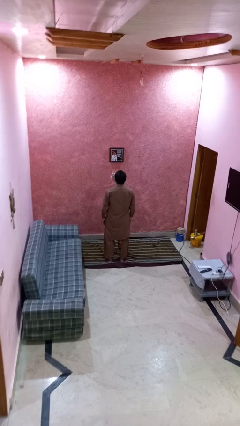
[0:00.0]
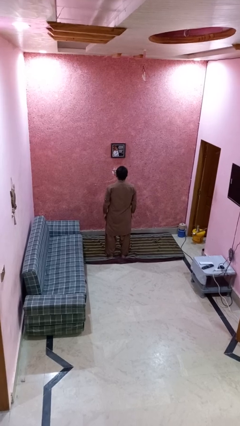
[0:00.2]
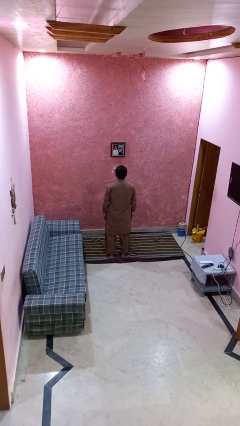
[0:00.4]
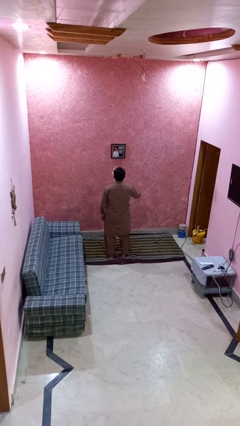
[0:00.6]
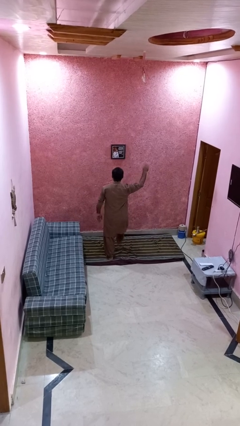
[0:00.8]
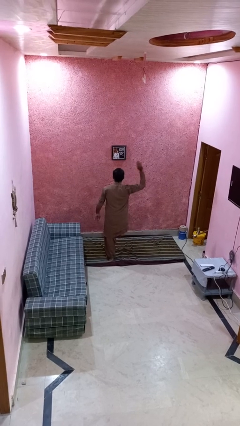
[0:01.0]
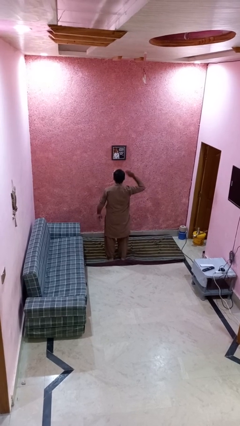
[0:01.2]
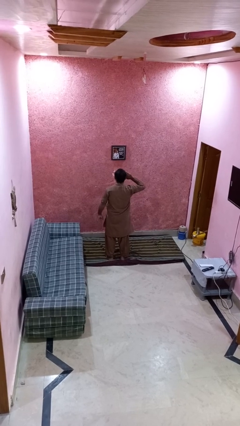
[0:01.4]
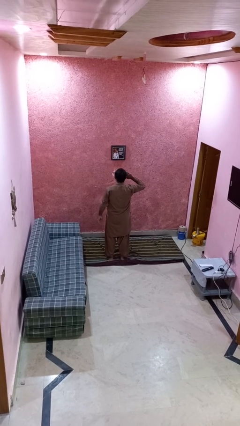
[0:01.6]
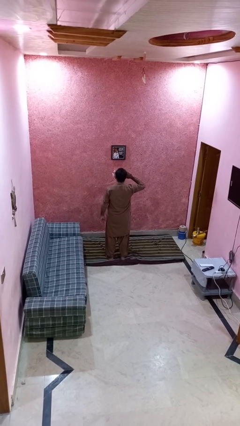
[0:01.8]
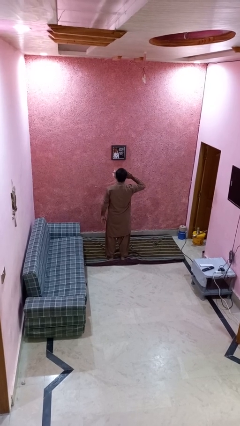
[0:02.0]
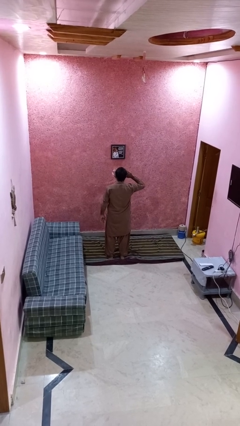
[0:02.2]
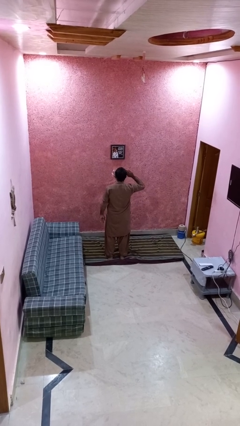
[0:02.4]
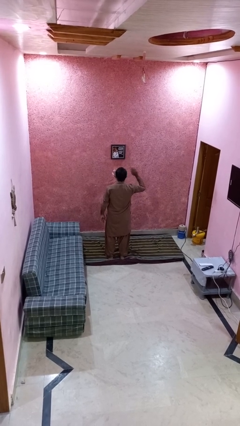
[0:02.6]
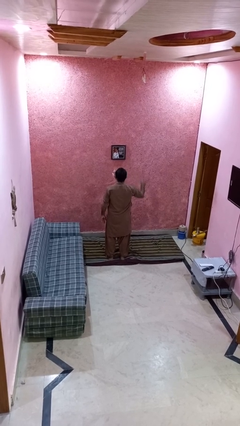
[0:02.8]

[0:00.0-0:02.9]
person salutes

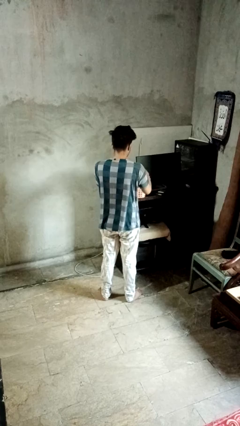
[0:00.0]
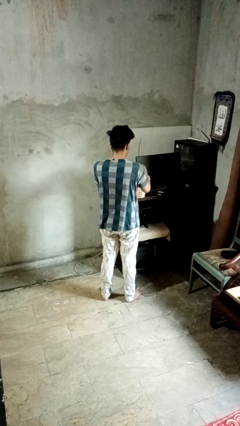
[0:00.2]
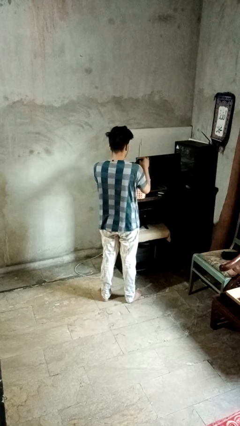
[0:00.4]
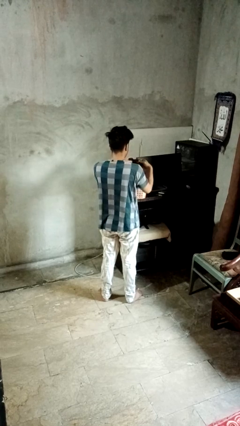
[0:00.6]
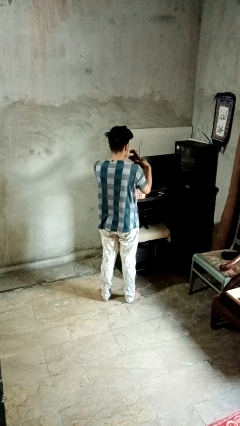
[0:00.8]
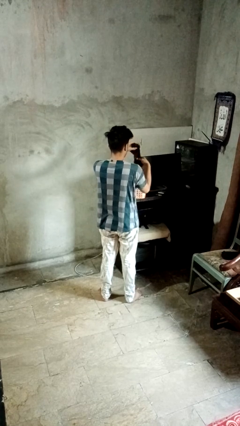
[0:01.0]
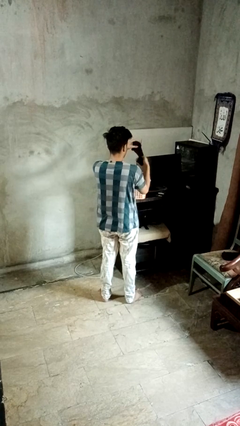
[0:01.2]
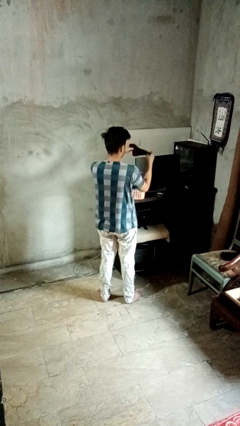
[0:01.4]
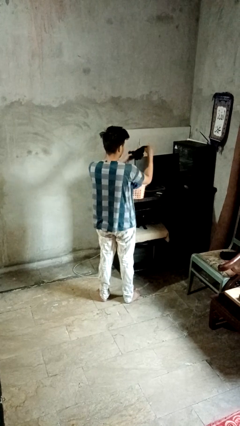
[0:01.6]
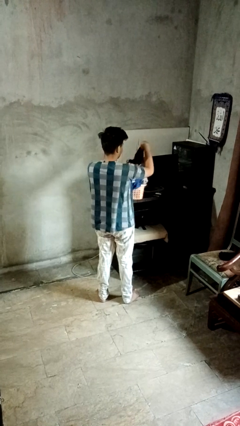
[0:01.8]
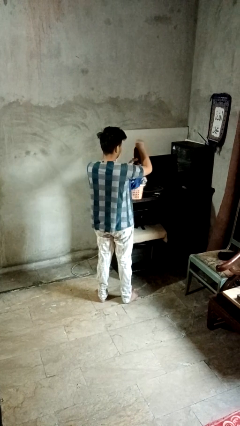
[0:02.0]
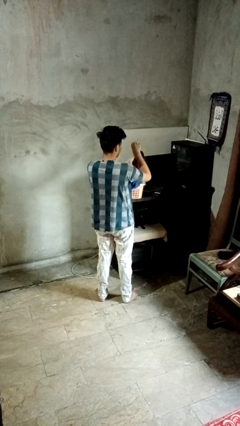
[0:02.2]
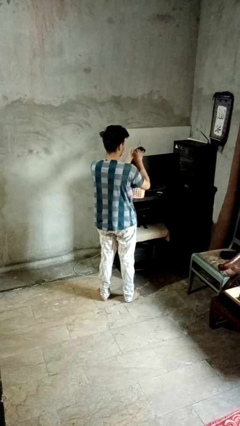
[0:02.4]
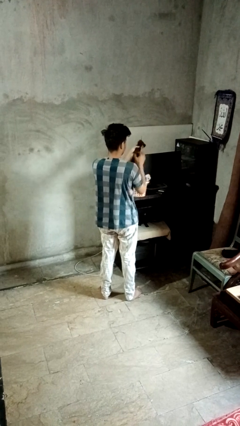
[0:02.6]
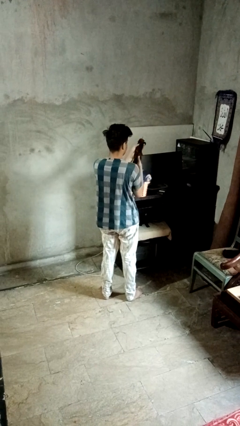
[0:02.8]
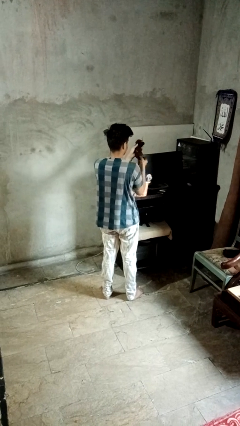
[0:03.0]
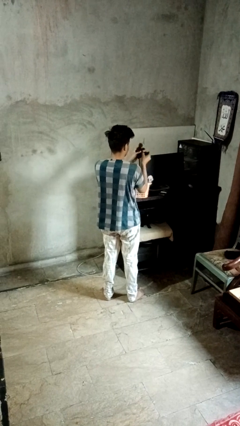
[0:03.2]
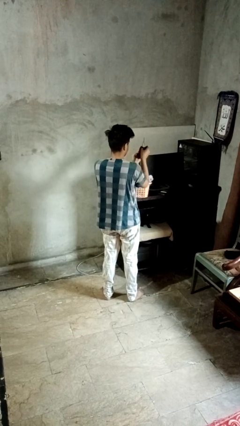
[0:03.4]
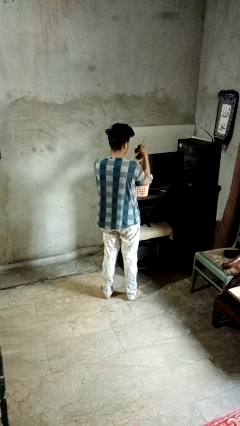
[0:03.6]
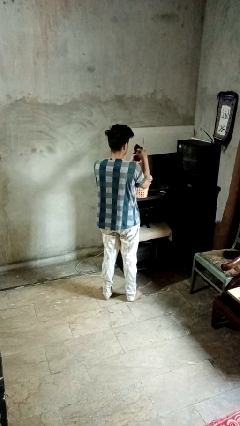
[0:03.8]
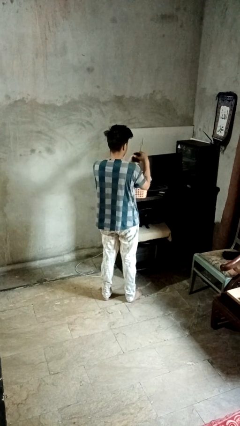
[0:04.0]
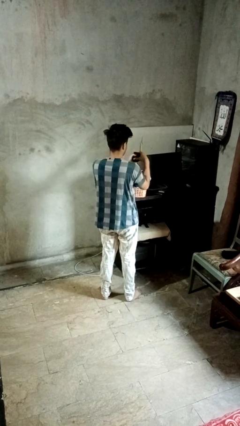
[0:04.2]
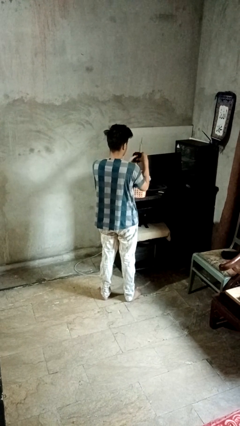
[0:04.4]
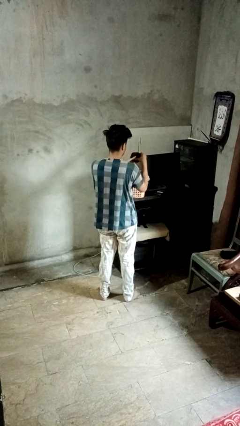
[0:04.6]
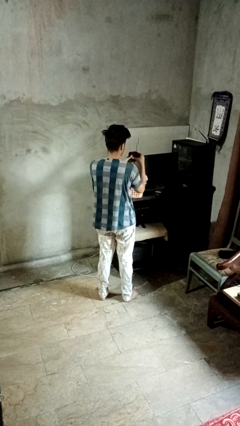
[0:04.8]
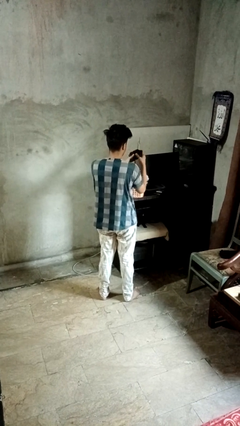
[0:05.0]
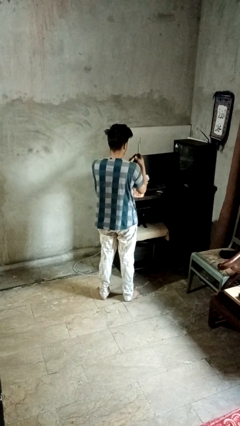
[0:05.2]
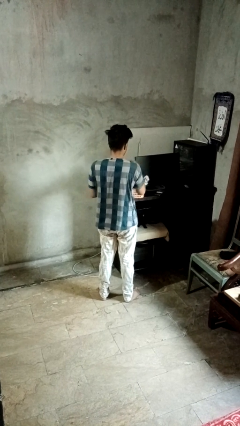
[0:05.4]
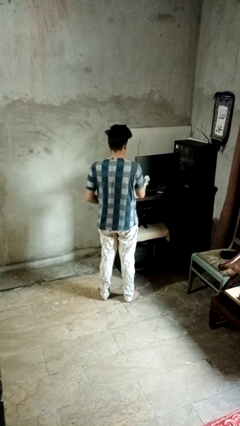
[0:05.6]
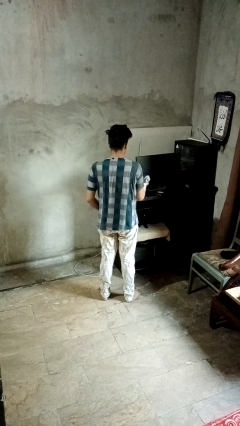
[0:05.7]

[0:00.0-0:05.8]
person folds socks

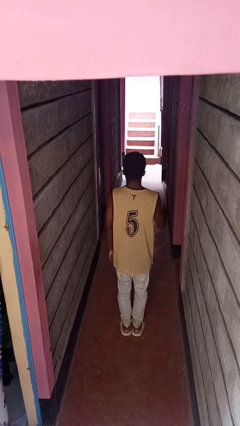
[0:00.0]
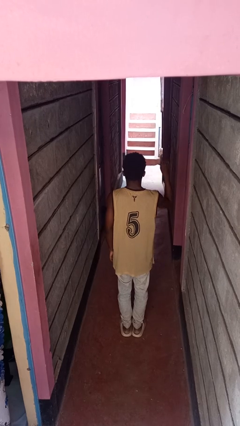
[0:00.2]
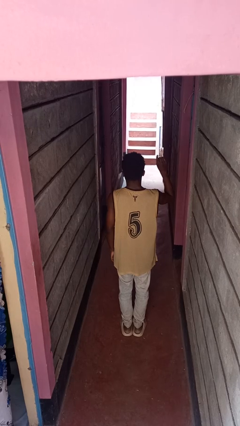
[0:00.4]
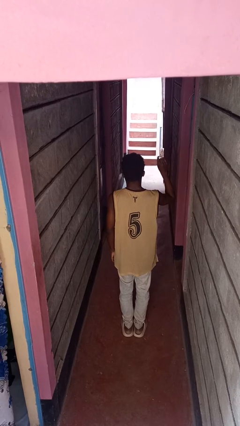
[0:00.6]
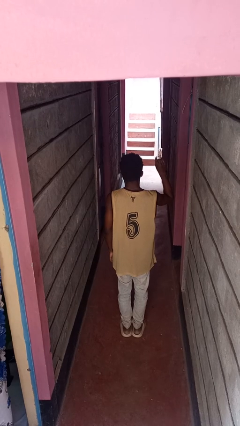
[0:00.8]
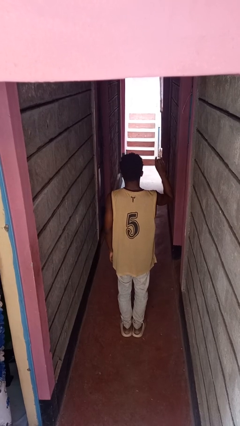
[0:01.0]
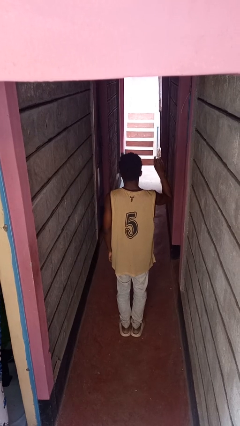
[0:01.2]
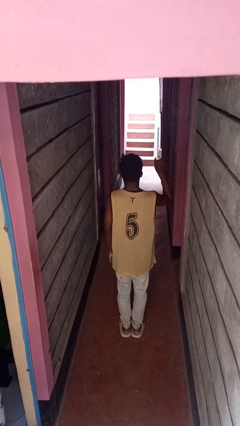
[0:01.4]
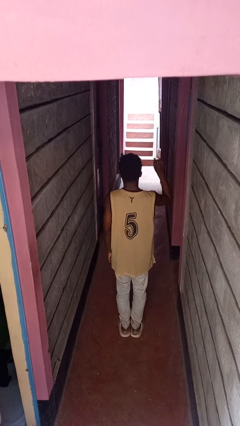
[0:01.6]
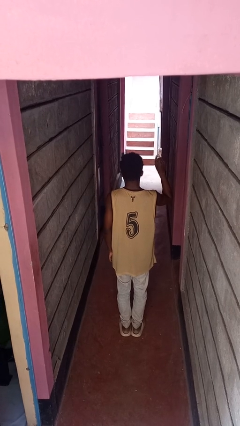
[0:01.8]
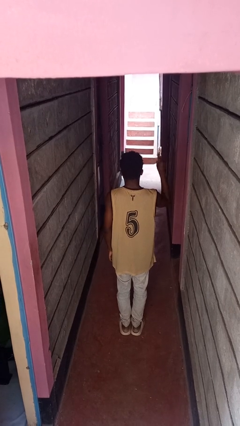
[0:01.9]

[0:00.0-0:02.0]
person gestures number one

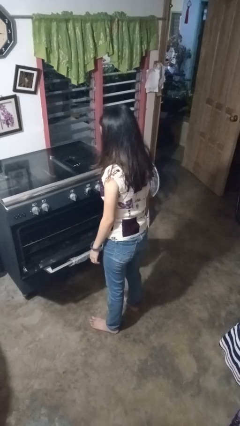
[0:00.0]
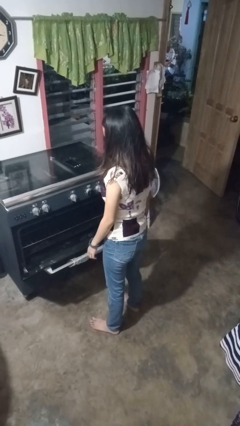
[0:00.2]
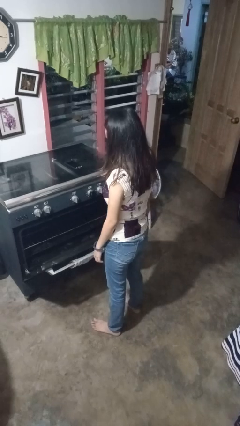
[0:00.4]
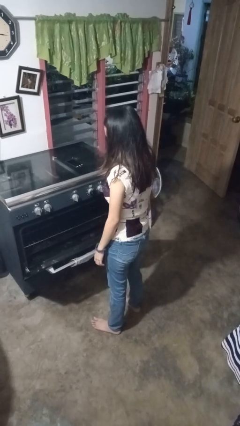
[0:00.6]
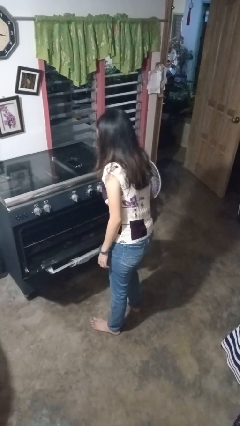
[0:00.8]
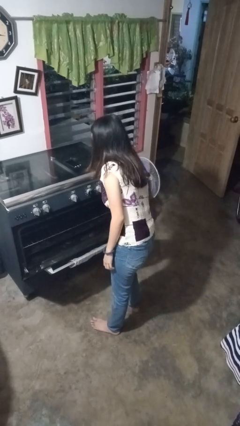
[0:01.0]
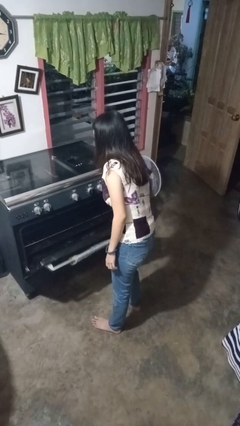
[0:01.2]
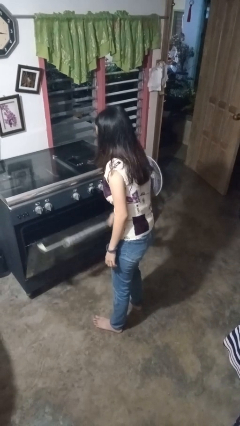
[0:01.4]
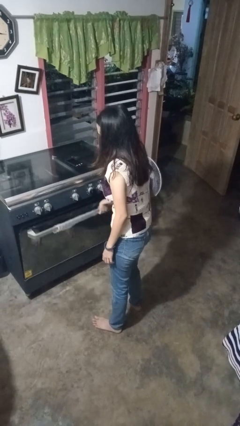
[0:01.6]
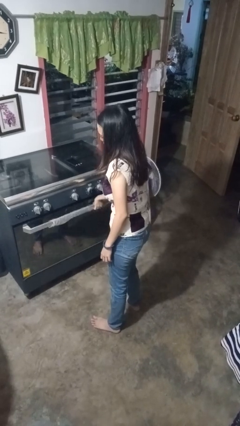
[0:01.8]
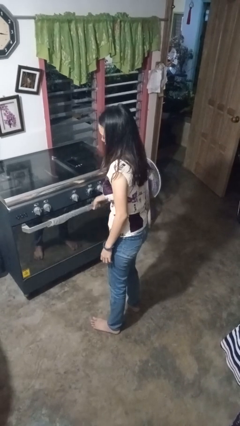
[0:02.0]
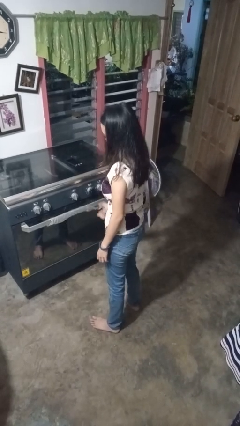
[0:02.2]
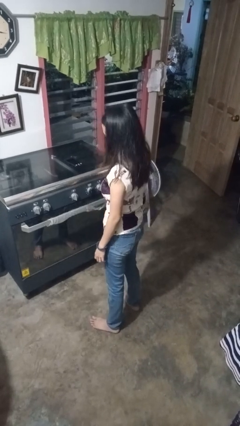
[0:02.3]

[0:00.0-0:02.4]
person closes oven door

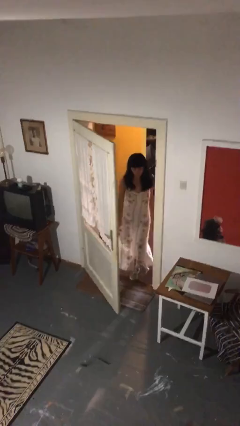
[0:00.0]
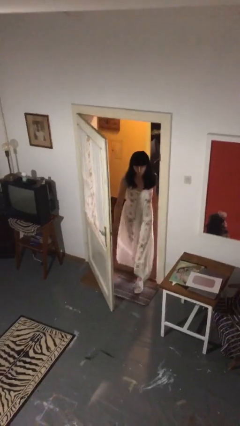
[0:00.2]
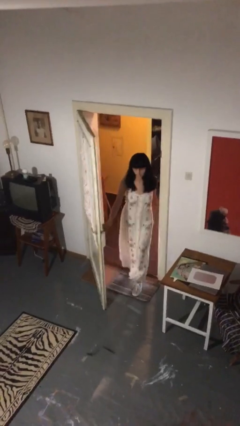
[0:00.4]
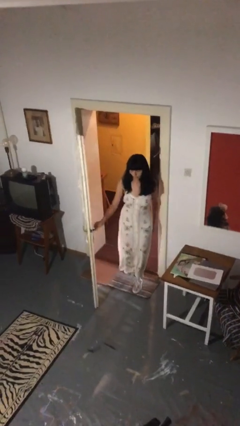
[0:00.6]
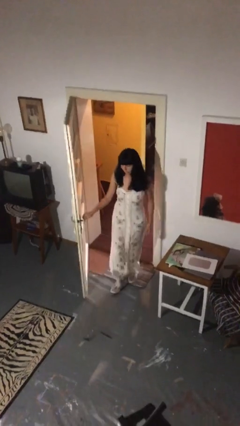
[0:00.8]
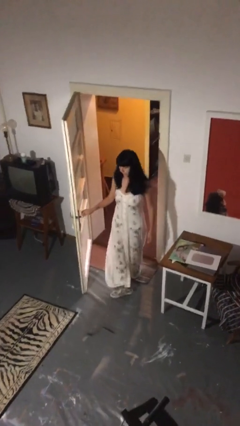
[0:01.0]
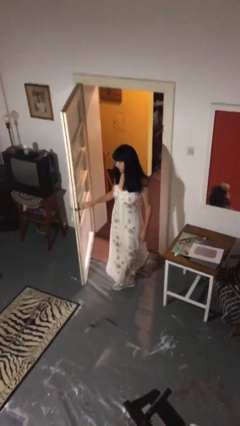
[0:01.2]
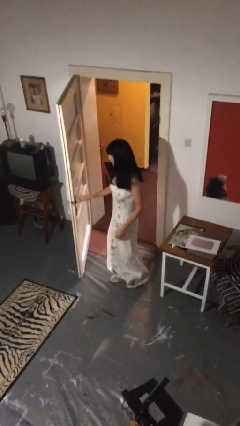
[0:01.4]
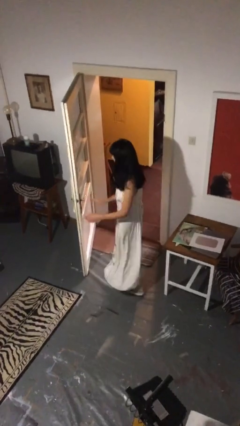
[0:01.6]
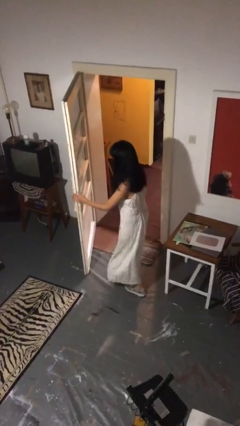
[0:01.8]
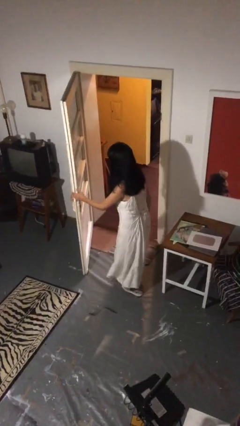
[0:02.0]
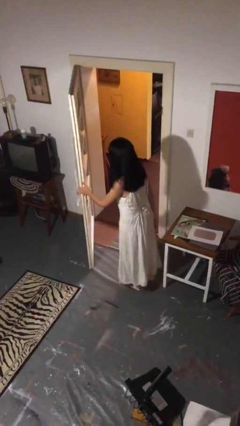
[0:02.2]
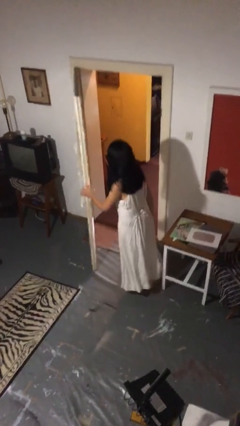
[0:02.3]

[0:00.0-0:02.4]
person enters scene through structure

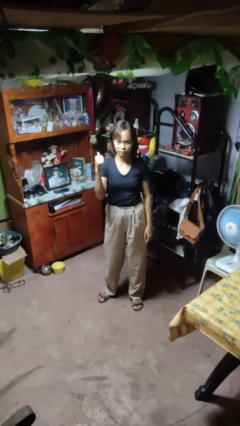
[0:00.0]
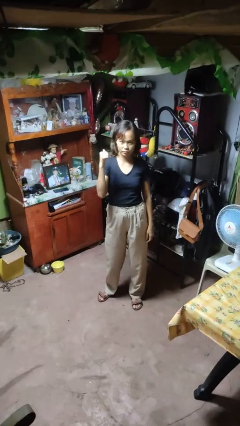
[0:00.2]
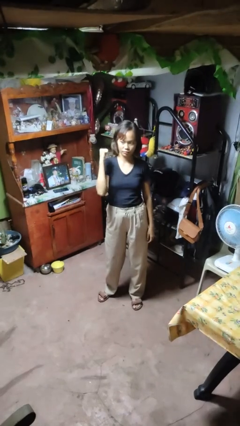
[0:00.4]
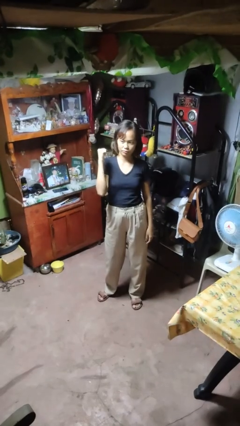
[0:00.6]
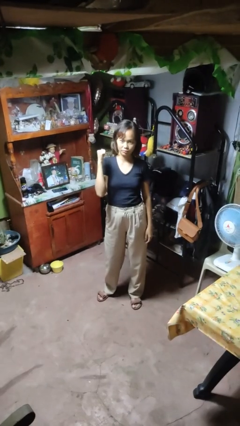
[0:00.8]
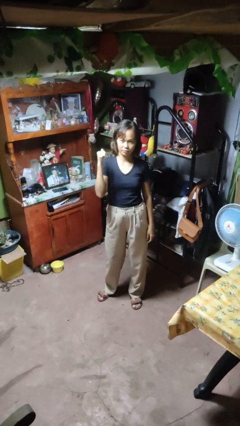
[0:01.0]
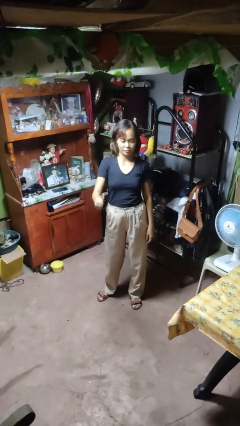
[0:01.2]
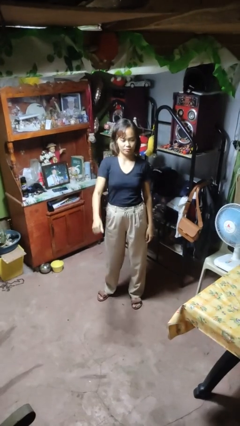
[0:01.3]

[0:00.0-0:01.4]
person gestures behind me

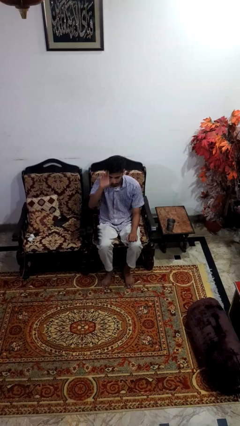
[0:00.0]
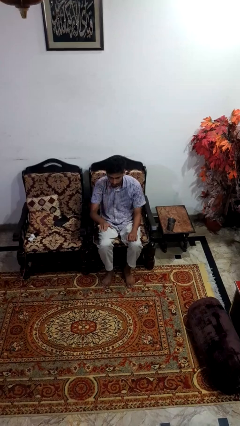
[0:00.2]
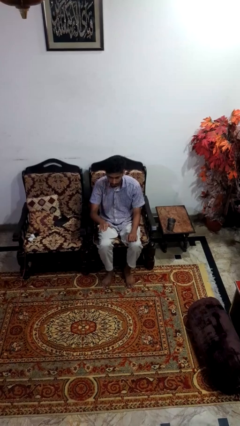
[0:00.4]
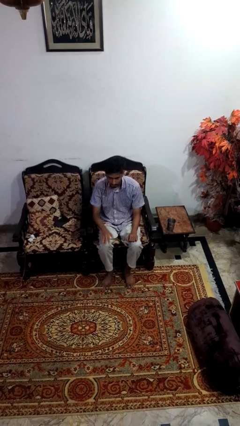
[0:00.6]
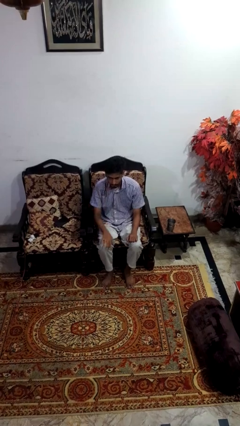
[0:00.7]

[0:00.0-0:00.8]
person gestures swipe down
